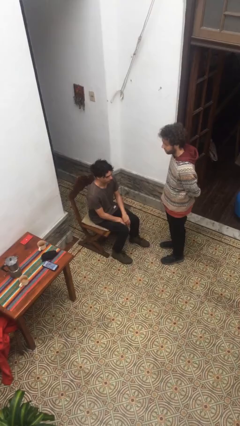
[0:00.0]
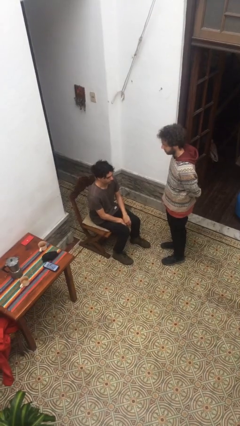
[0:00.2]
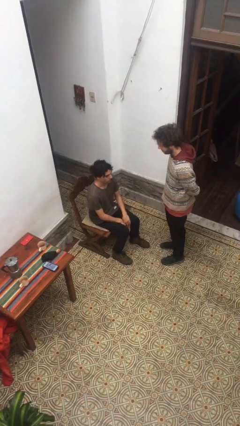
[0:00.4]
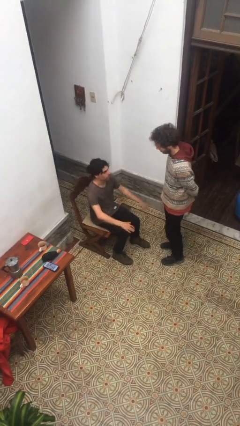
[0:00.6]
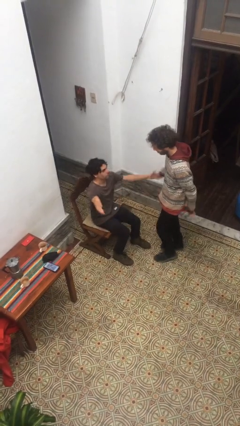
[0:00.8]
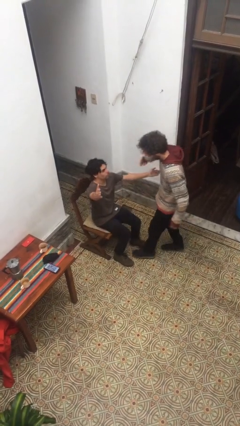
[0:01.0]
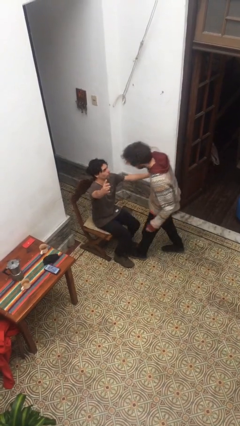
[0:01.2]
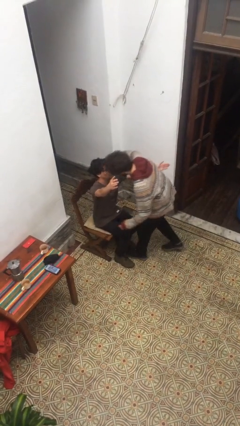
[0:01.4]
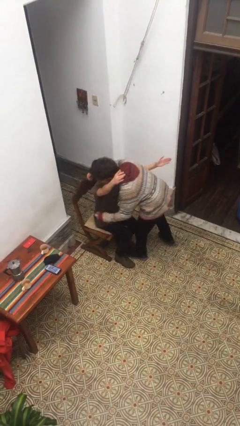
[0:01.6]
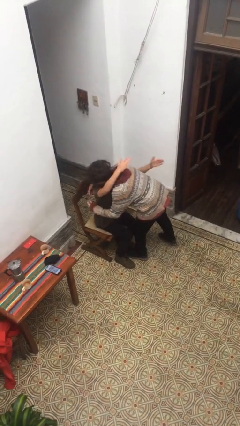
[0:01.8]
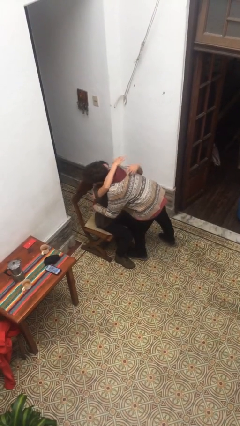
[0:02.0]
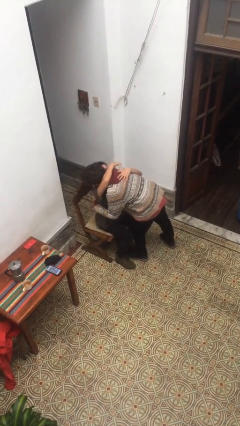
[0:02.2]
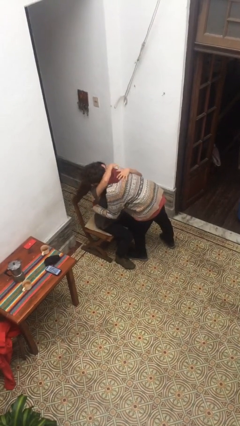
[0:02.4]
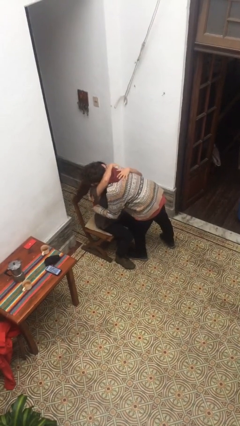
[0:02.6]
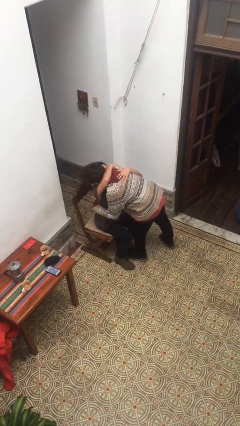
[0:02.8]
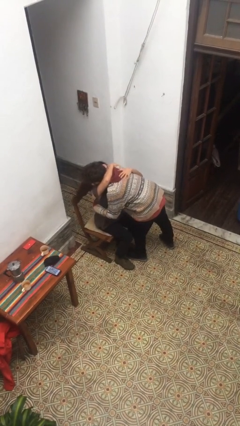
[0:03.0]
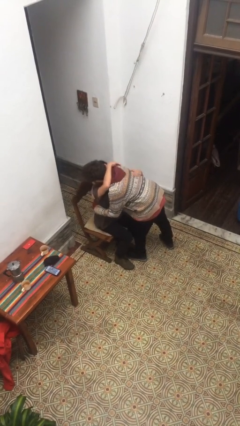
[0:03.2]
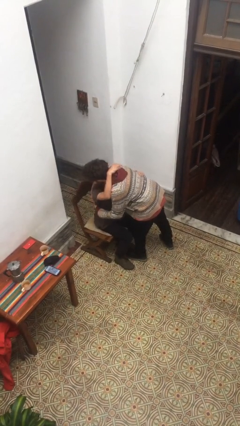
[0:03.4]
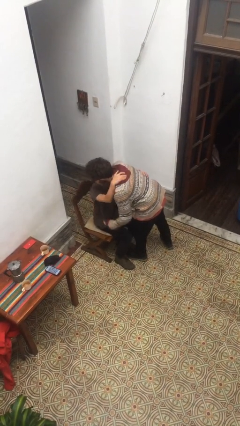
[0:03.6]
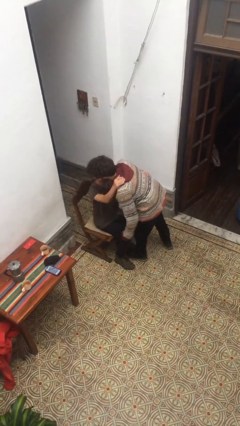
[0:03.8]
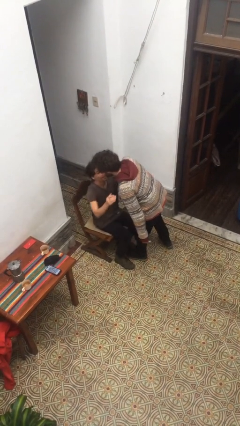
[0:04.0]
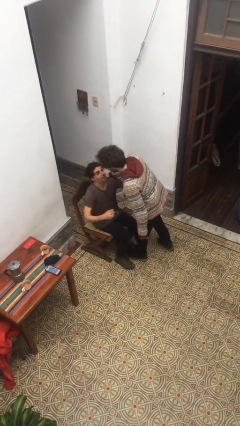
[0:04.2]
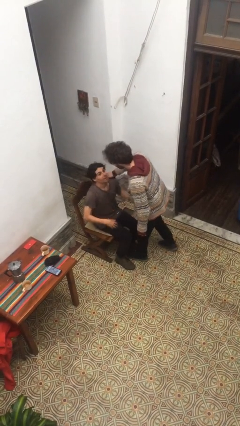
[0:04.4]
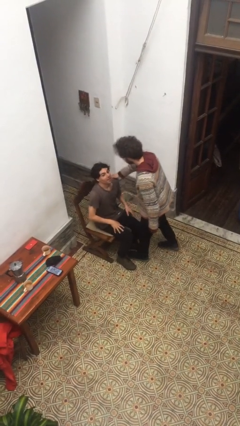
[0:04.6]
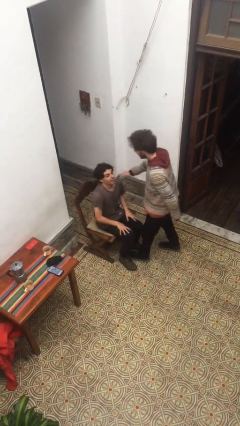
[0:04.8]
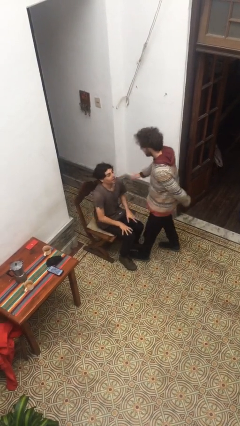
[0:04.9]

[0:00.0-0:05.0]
person embraces person

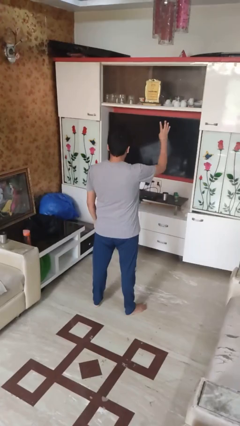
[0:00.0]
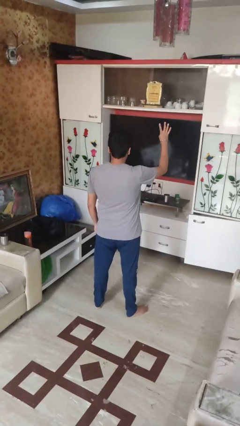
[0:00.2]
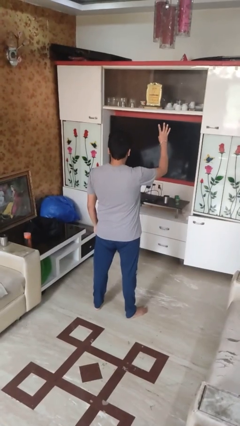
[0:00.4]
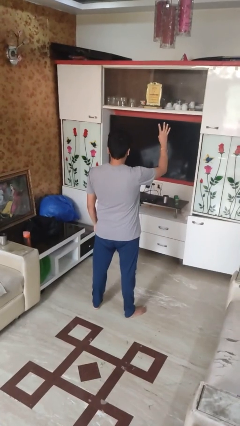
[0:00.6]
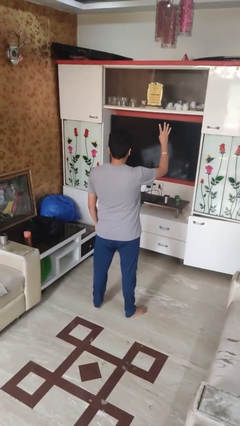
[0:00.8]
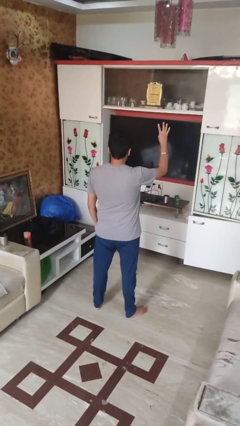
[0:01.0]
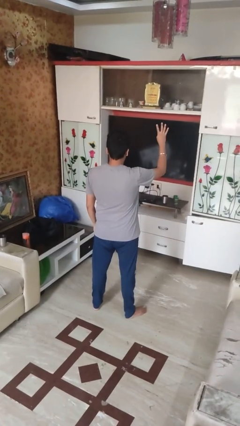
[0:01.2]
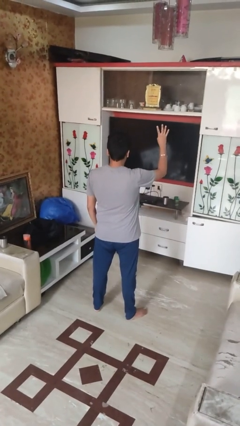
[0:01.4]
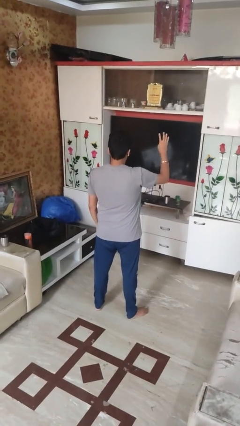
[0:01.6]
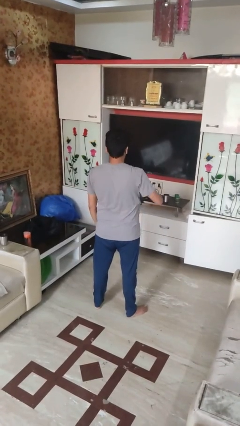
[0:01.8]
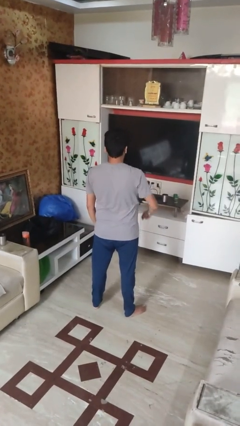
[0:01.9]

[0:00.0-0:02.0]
person gestures number four

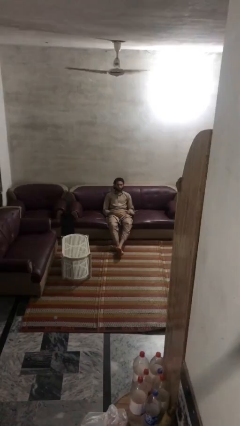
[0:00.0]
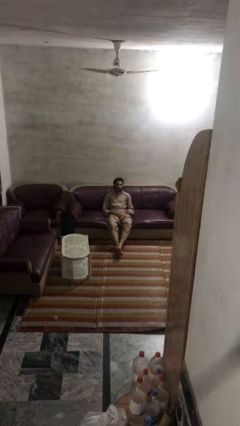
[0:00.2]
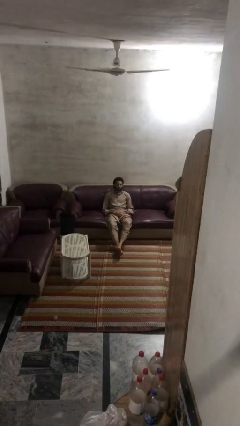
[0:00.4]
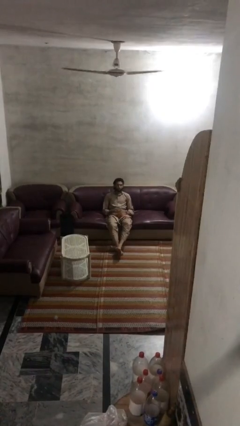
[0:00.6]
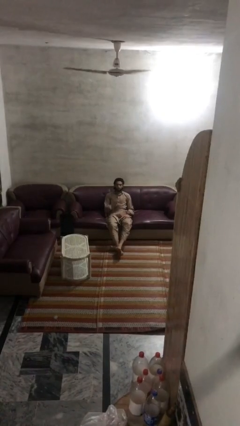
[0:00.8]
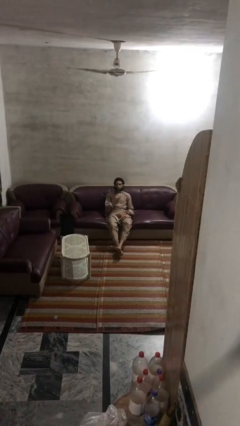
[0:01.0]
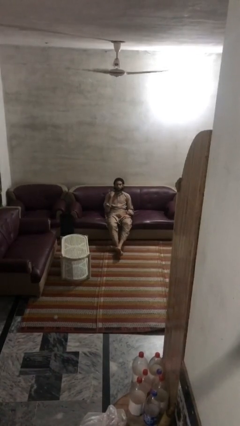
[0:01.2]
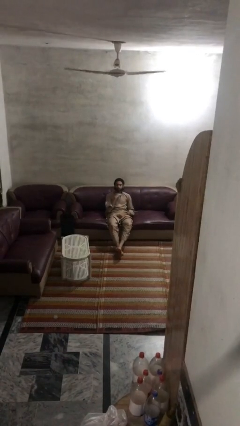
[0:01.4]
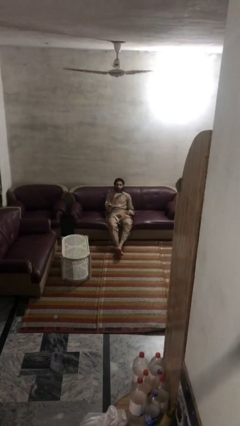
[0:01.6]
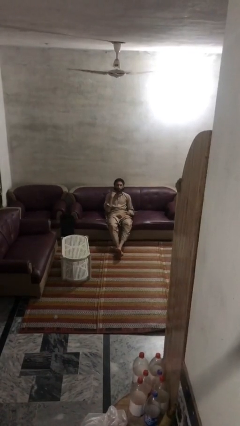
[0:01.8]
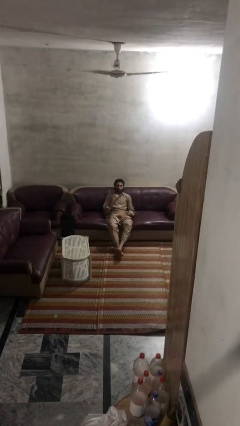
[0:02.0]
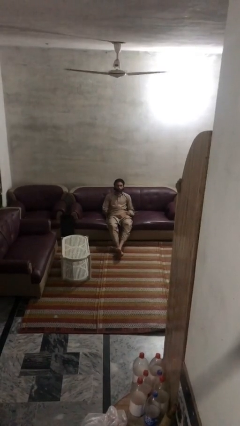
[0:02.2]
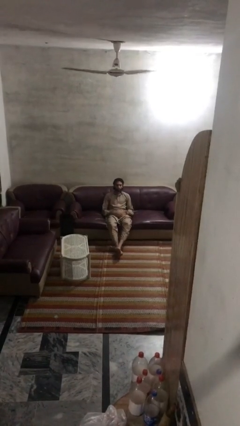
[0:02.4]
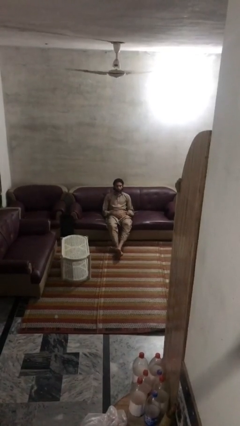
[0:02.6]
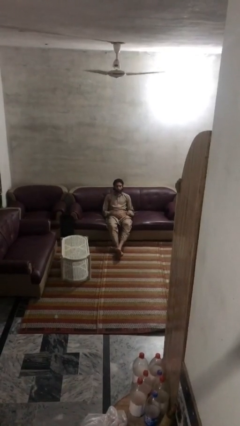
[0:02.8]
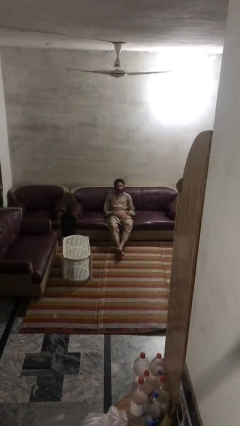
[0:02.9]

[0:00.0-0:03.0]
person gestures cut

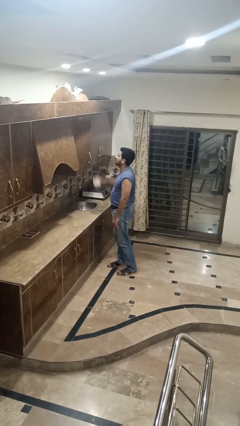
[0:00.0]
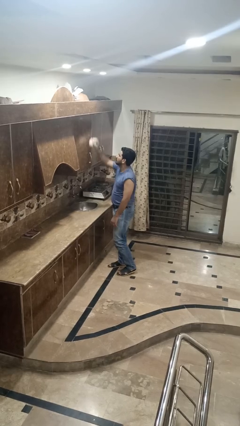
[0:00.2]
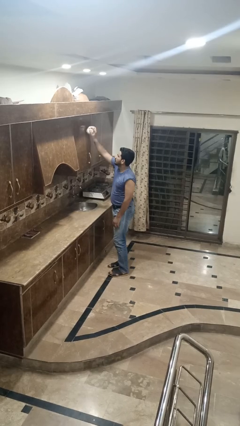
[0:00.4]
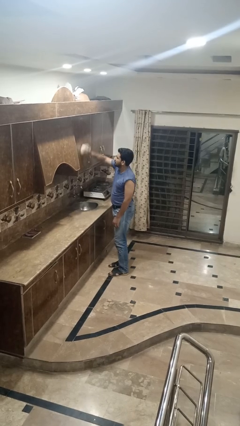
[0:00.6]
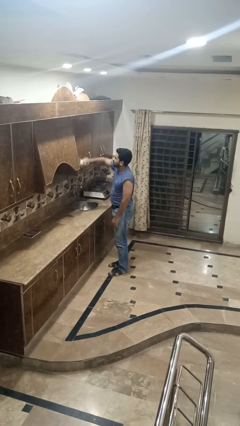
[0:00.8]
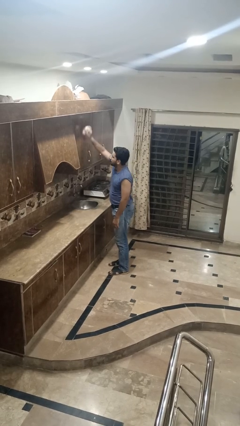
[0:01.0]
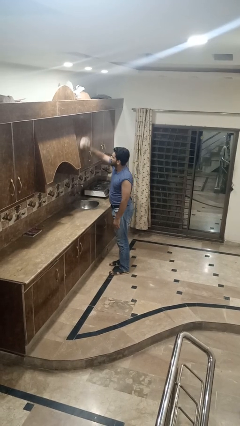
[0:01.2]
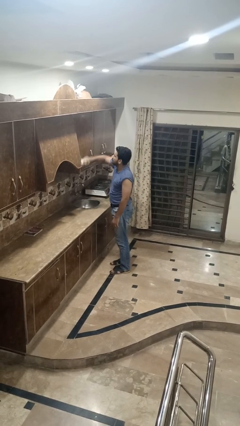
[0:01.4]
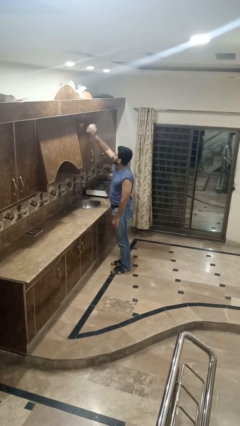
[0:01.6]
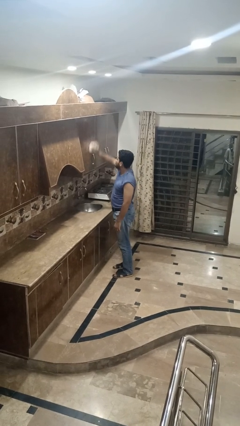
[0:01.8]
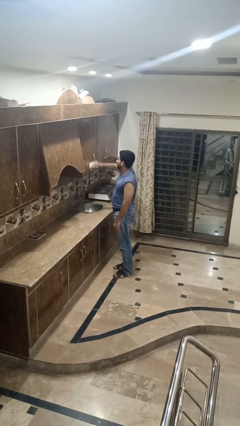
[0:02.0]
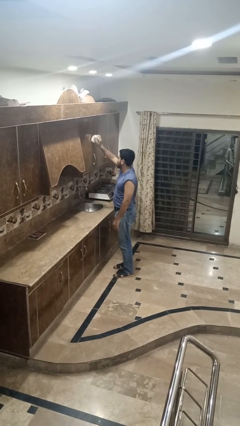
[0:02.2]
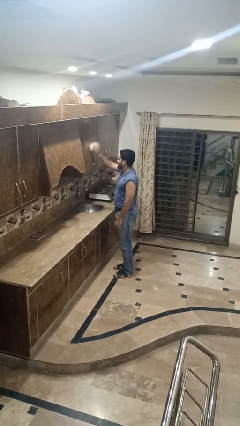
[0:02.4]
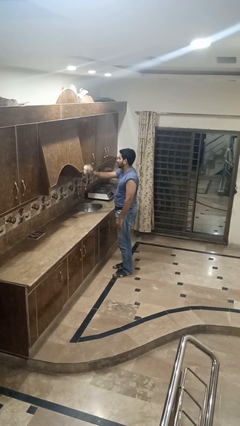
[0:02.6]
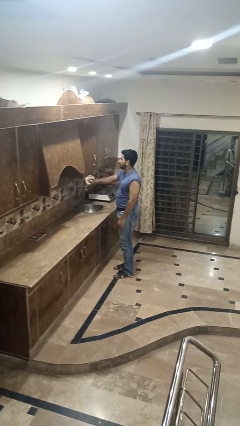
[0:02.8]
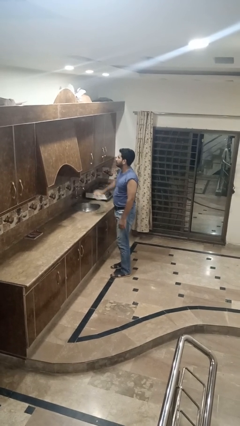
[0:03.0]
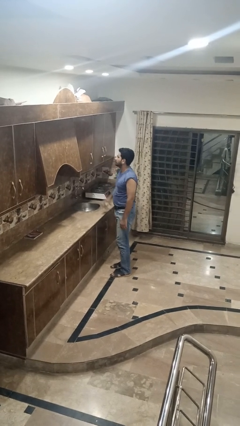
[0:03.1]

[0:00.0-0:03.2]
person dusts furniture

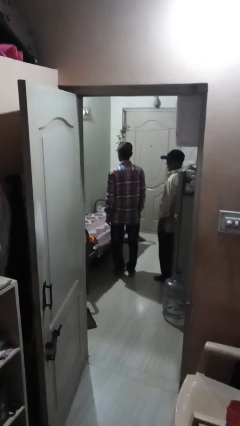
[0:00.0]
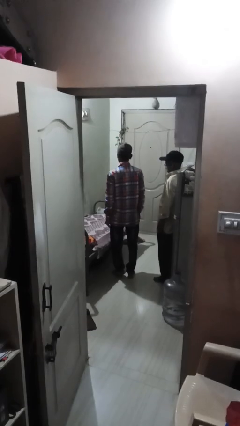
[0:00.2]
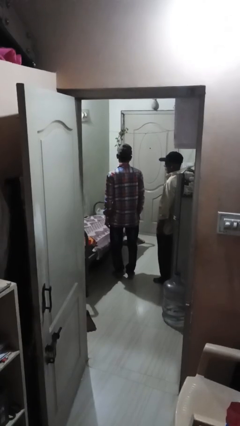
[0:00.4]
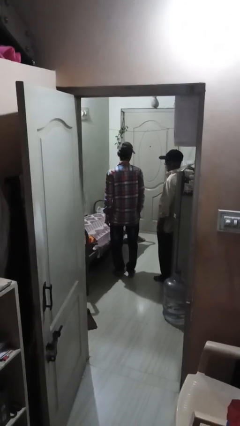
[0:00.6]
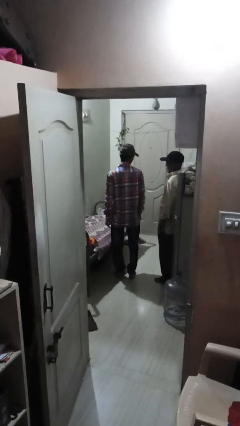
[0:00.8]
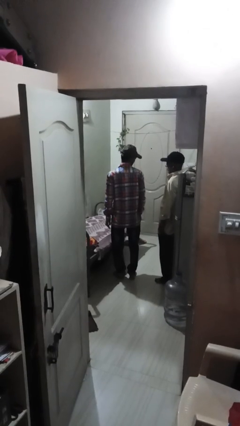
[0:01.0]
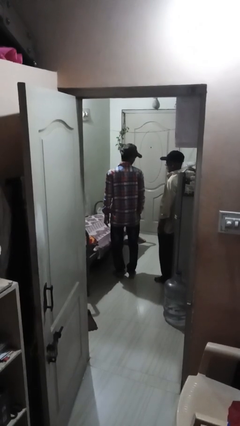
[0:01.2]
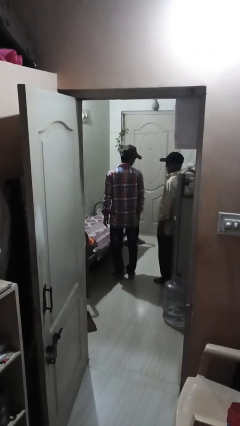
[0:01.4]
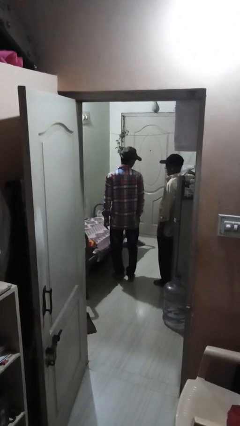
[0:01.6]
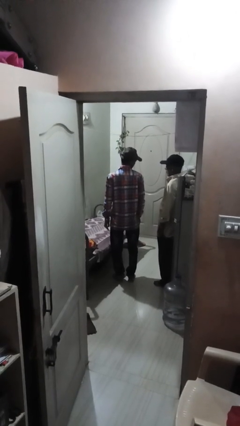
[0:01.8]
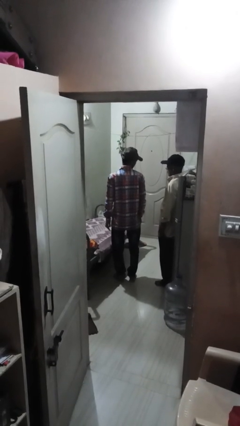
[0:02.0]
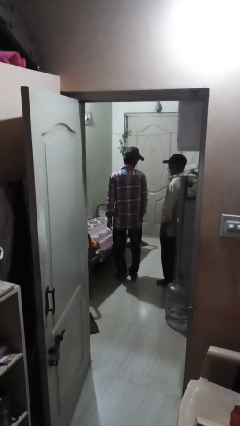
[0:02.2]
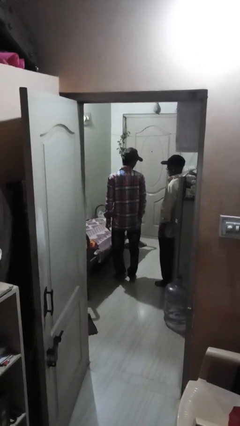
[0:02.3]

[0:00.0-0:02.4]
person looks over shoulder

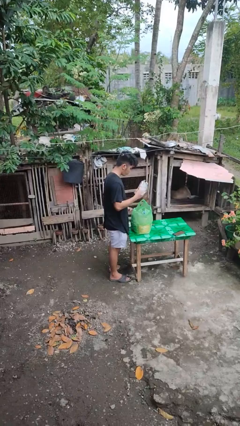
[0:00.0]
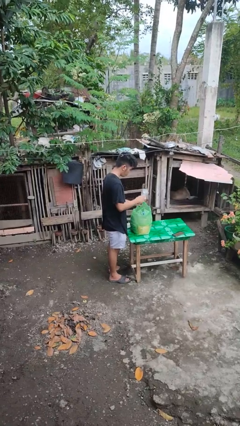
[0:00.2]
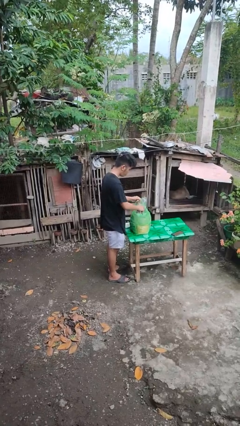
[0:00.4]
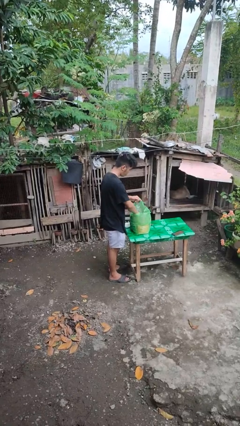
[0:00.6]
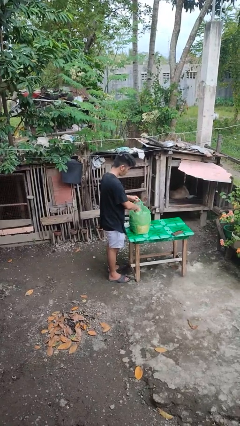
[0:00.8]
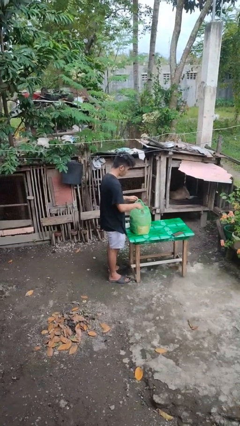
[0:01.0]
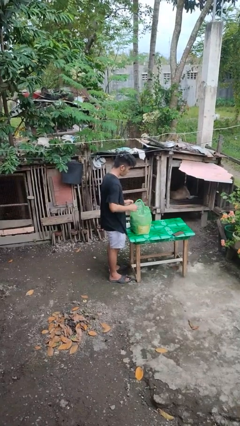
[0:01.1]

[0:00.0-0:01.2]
person puts object into bag
